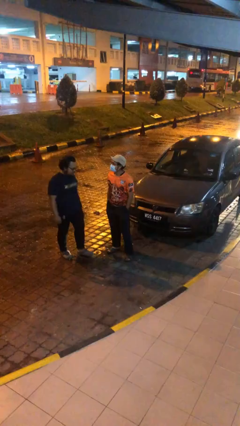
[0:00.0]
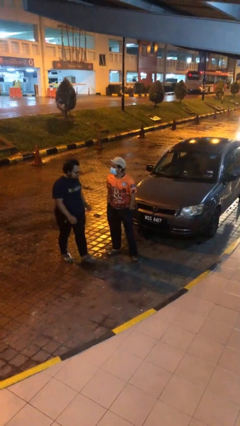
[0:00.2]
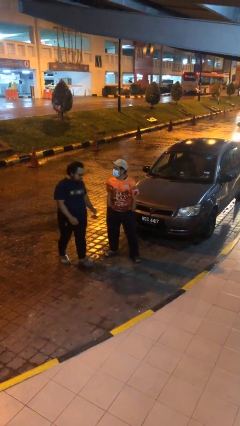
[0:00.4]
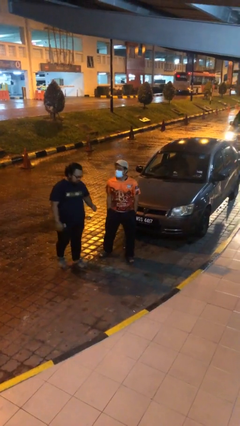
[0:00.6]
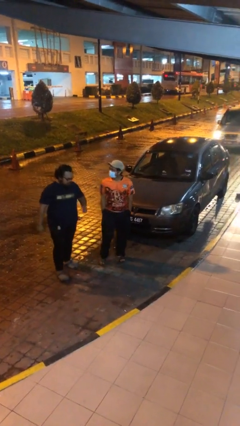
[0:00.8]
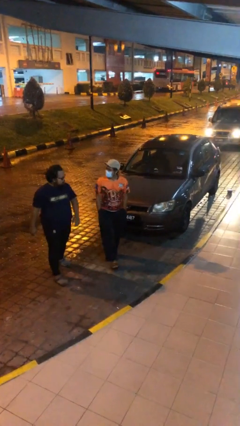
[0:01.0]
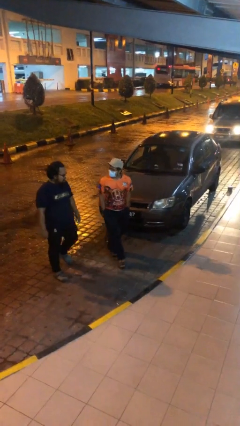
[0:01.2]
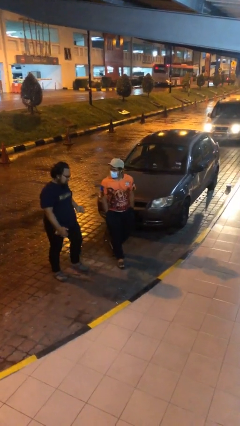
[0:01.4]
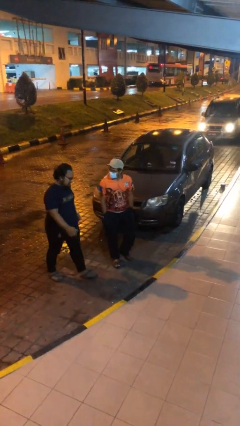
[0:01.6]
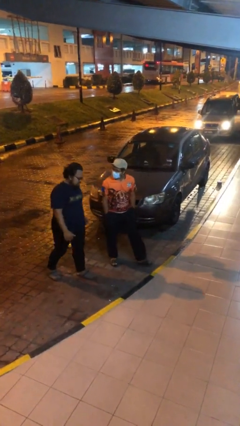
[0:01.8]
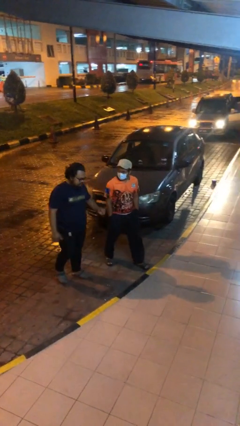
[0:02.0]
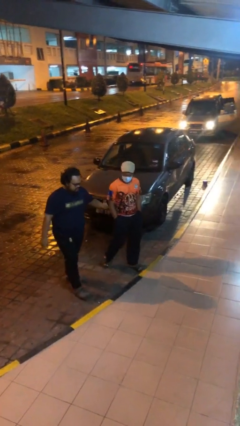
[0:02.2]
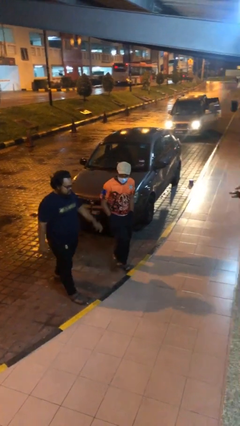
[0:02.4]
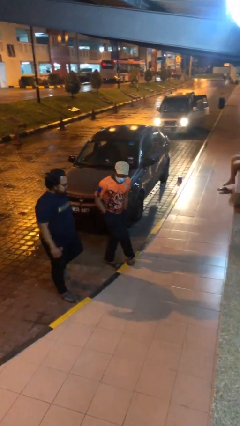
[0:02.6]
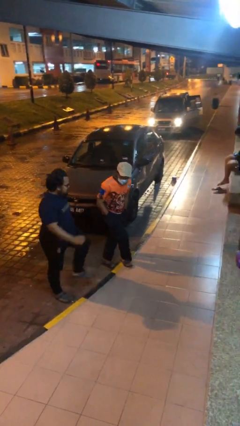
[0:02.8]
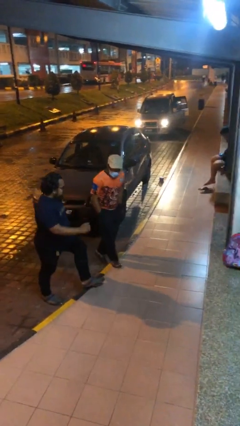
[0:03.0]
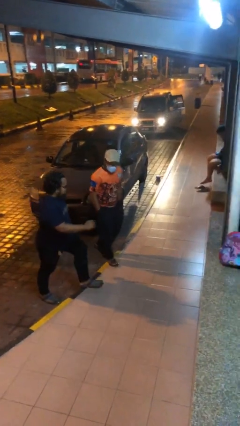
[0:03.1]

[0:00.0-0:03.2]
person talks to person

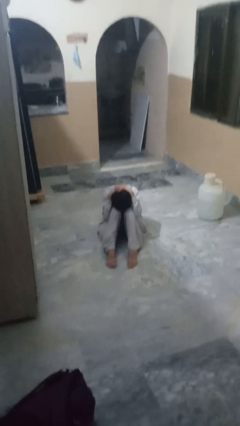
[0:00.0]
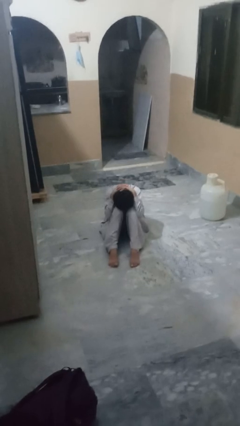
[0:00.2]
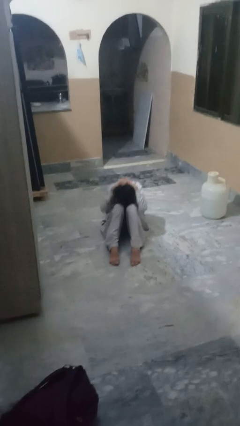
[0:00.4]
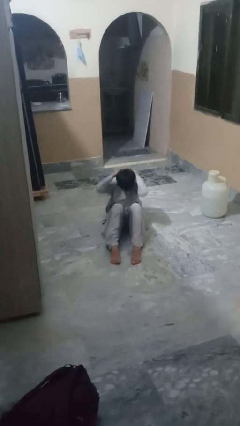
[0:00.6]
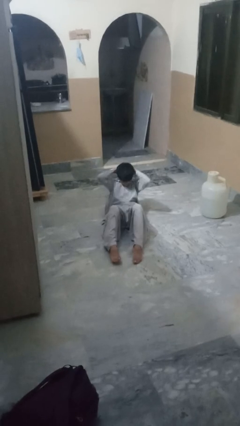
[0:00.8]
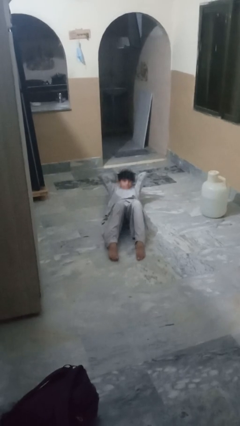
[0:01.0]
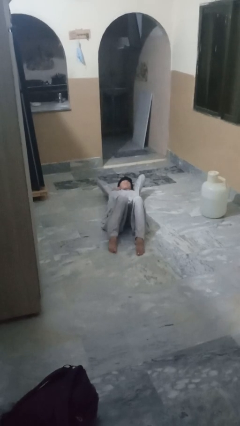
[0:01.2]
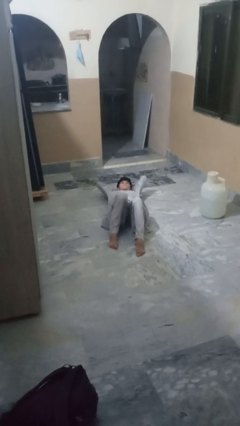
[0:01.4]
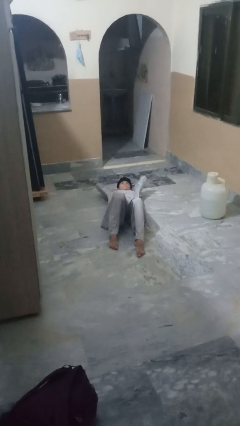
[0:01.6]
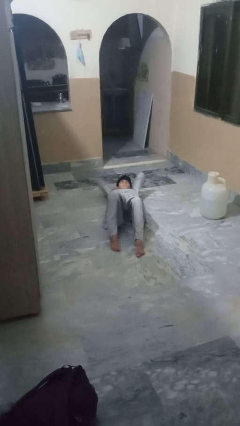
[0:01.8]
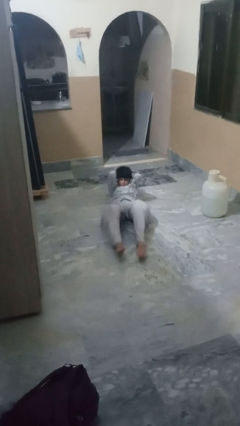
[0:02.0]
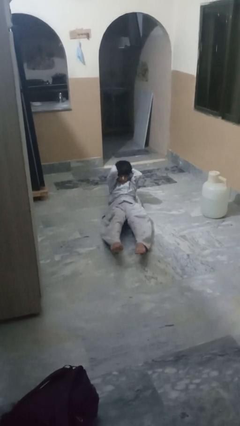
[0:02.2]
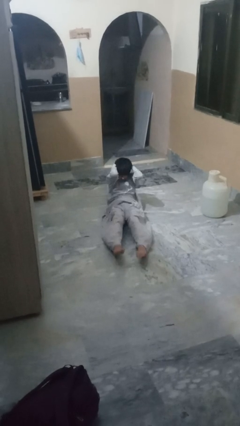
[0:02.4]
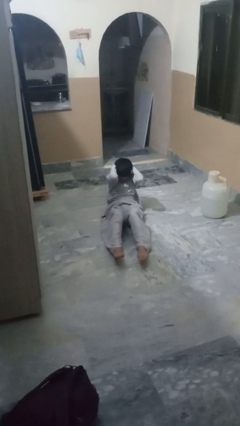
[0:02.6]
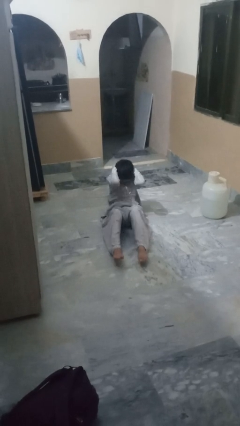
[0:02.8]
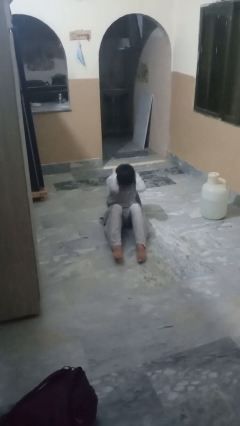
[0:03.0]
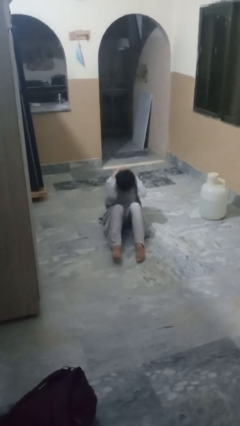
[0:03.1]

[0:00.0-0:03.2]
person exercises with situp

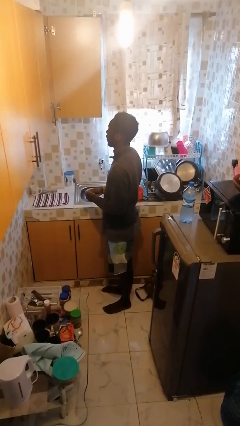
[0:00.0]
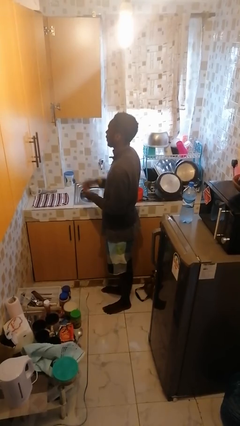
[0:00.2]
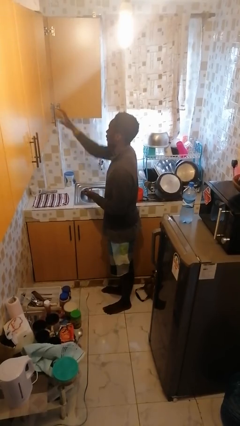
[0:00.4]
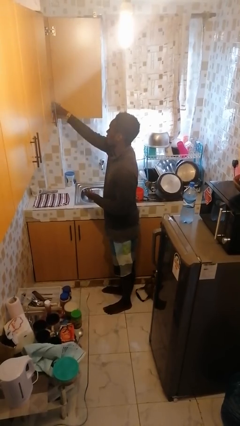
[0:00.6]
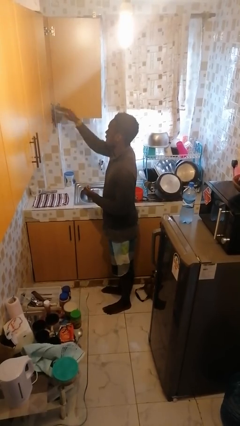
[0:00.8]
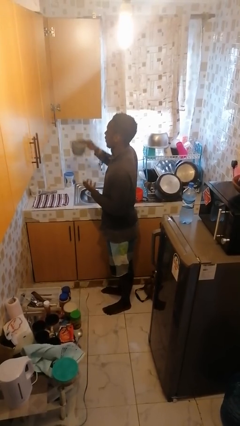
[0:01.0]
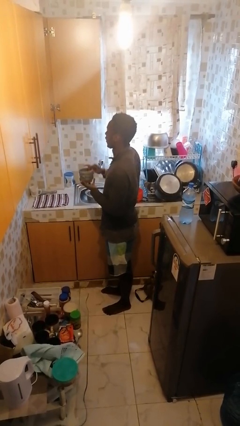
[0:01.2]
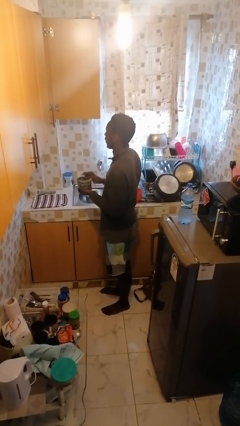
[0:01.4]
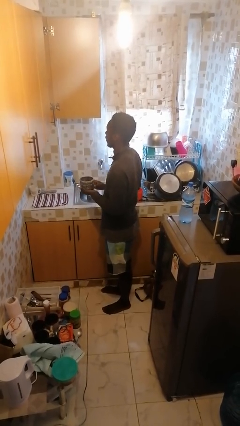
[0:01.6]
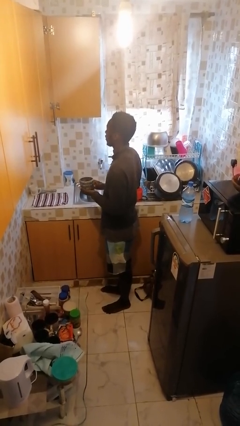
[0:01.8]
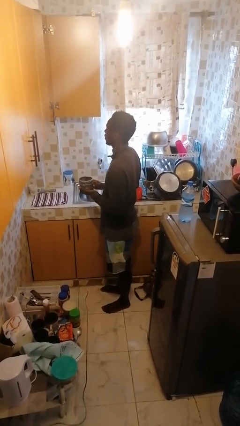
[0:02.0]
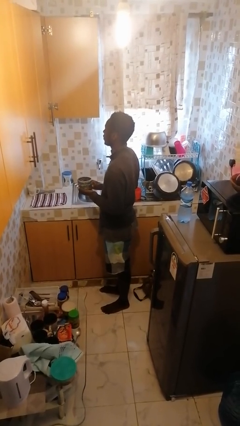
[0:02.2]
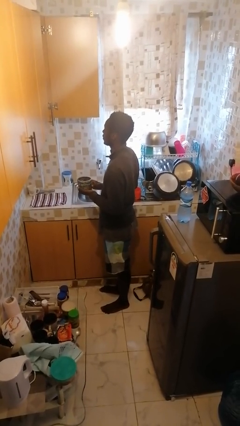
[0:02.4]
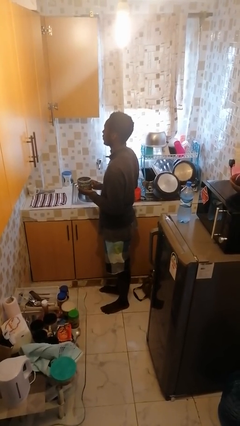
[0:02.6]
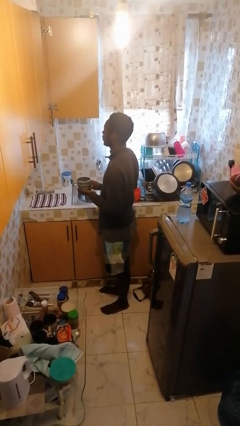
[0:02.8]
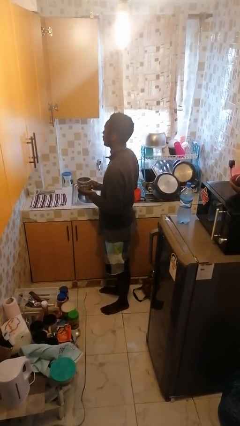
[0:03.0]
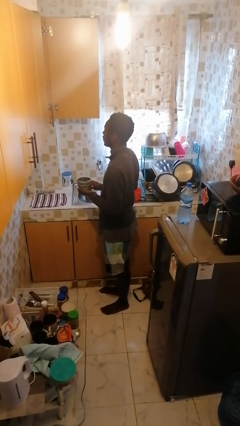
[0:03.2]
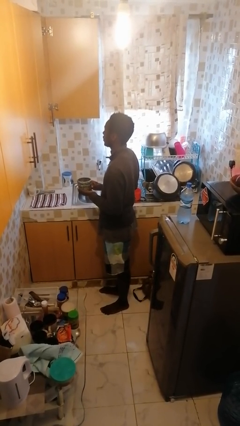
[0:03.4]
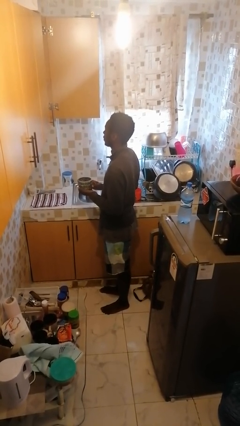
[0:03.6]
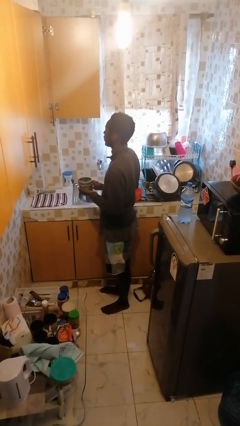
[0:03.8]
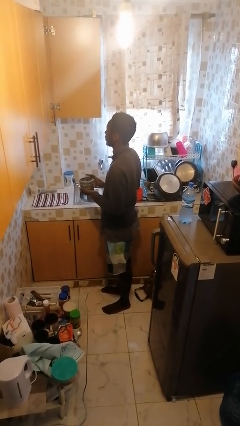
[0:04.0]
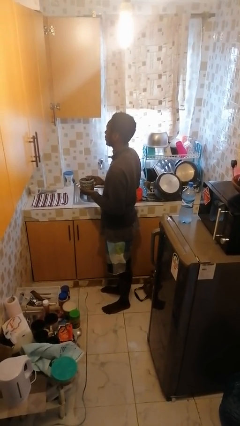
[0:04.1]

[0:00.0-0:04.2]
person picks up object from cabinet

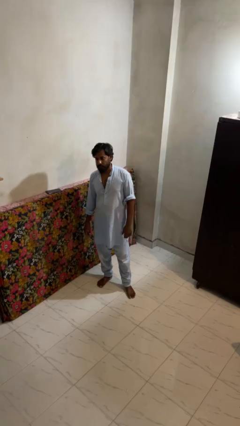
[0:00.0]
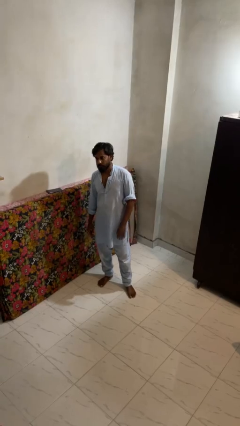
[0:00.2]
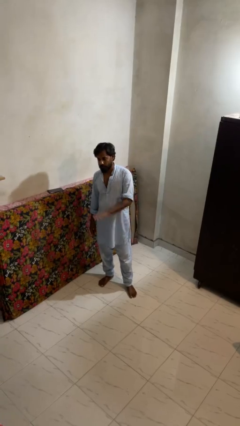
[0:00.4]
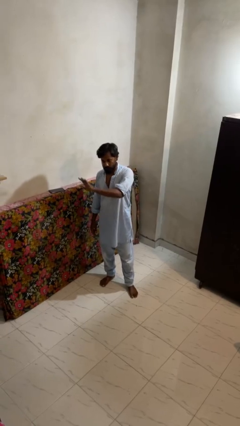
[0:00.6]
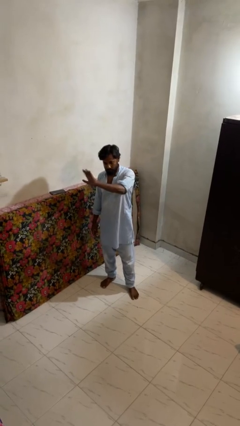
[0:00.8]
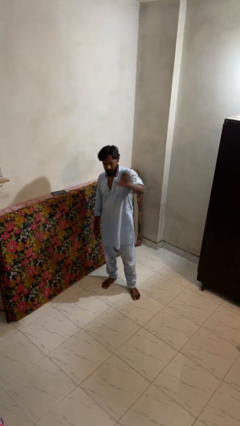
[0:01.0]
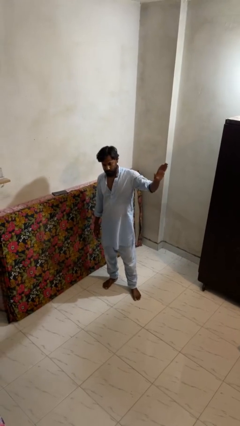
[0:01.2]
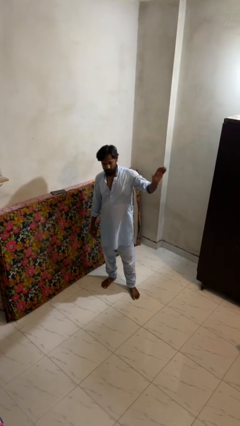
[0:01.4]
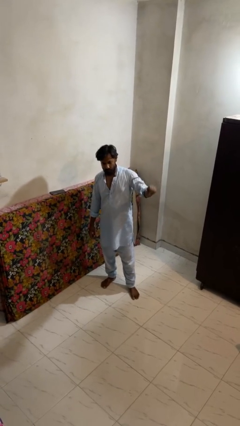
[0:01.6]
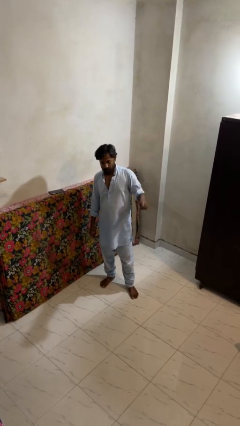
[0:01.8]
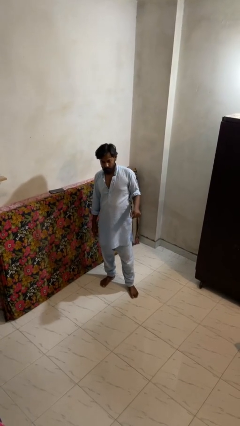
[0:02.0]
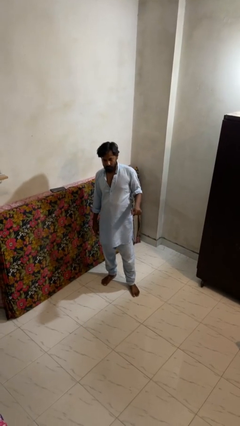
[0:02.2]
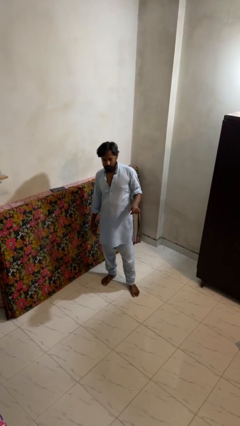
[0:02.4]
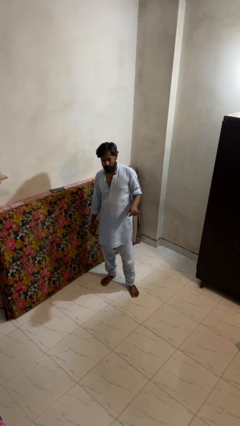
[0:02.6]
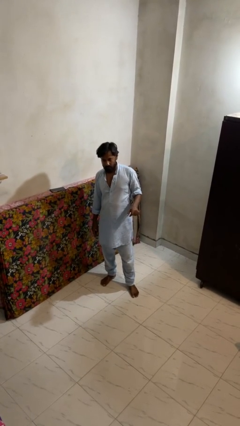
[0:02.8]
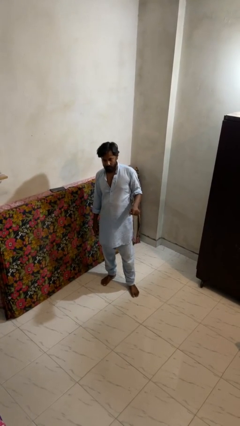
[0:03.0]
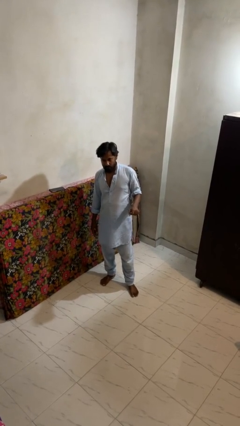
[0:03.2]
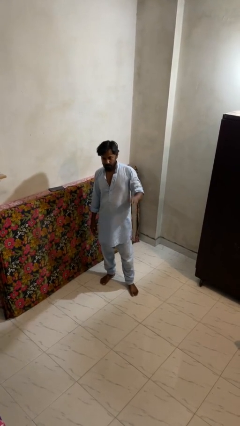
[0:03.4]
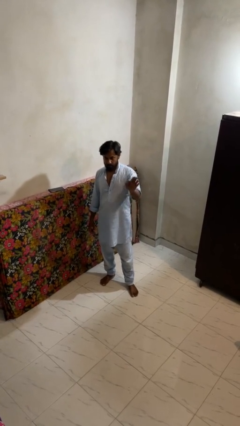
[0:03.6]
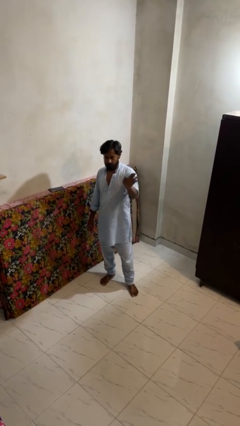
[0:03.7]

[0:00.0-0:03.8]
person gestures swipe left

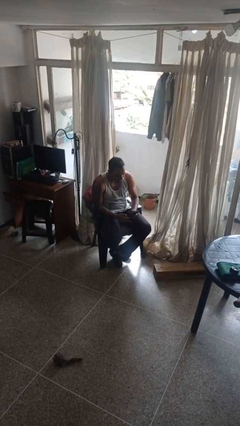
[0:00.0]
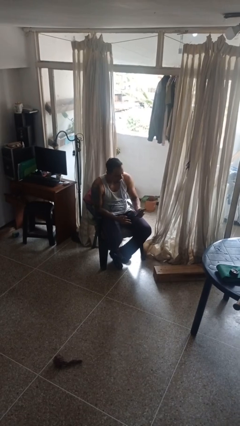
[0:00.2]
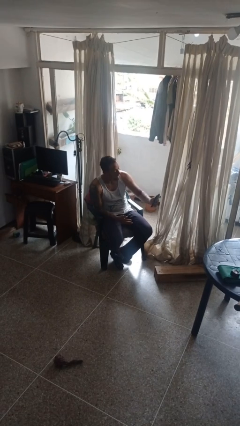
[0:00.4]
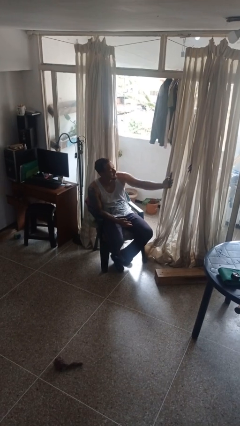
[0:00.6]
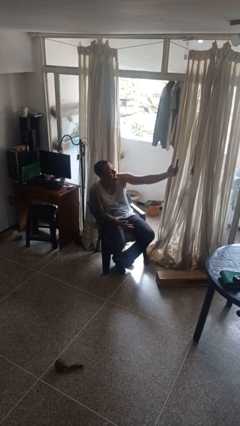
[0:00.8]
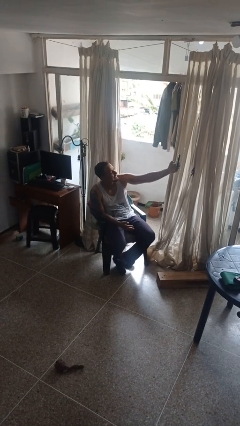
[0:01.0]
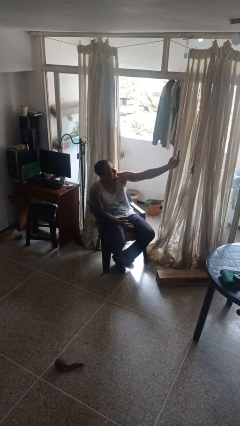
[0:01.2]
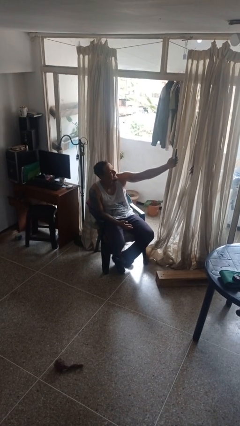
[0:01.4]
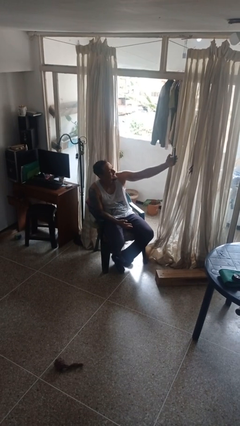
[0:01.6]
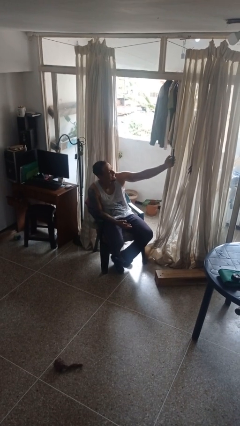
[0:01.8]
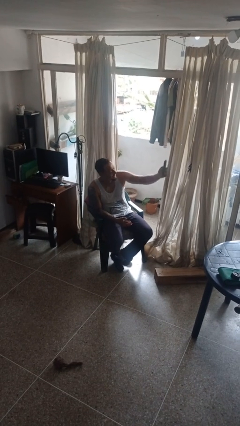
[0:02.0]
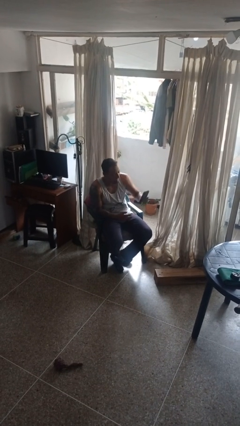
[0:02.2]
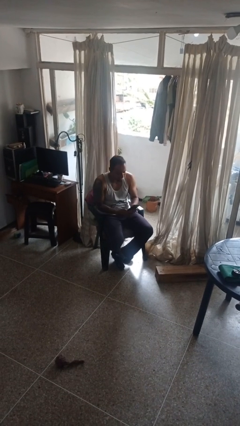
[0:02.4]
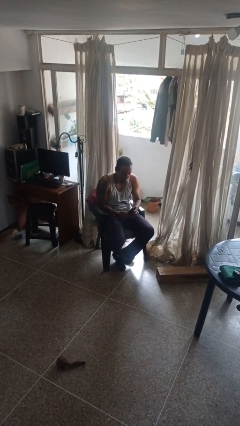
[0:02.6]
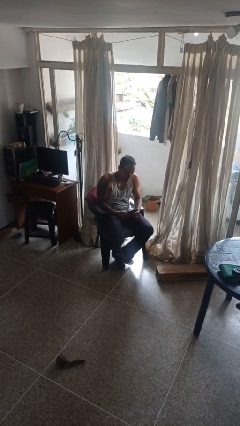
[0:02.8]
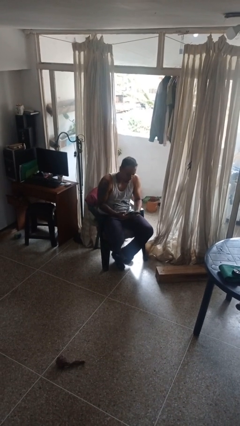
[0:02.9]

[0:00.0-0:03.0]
person takes selfie
